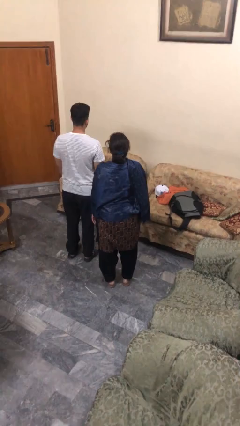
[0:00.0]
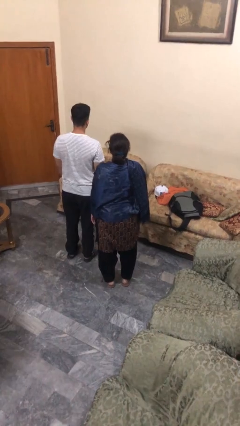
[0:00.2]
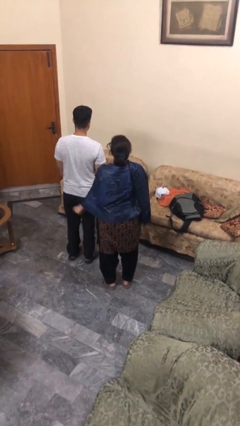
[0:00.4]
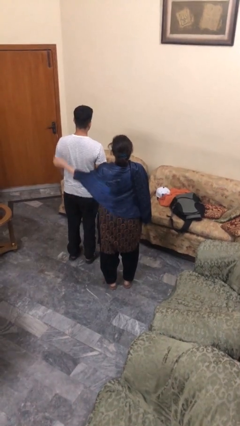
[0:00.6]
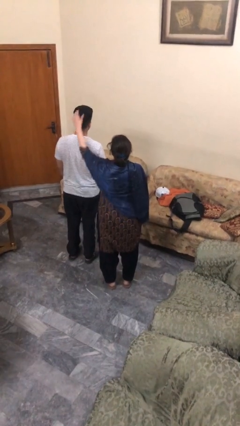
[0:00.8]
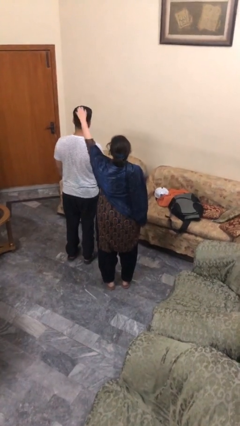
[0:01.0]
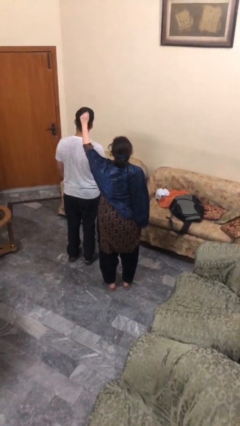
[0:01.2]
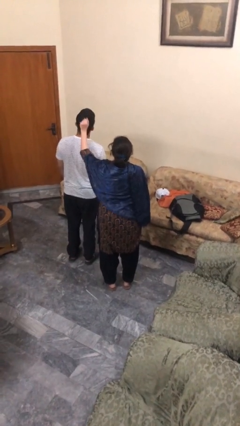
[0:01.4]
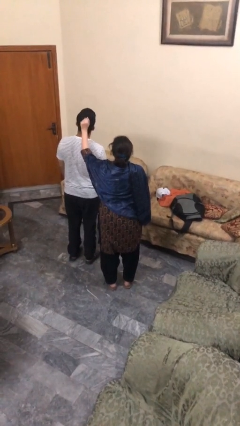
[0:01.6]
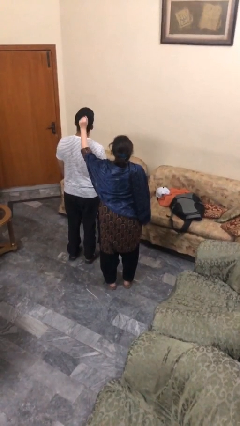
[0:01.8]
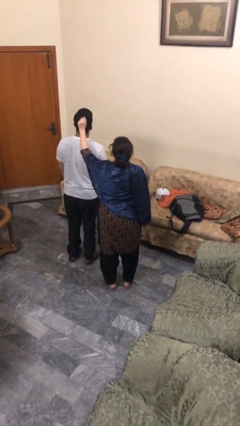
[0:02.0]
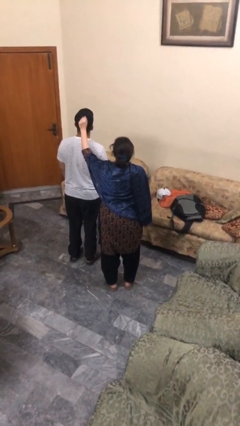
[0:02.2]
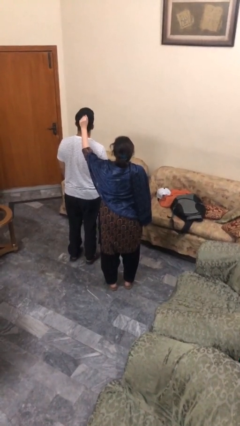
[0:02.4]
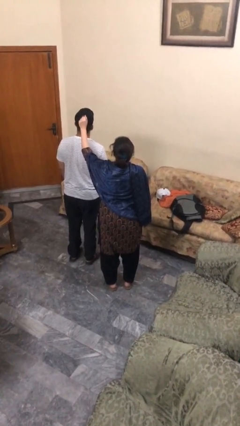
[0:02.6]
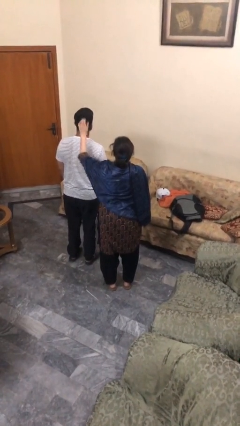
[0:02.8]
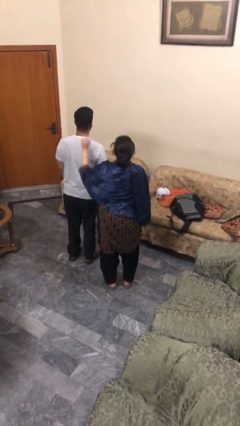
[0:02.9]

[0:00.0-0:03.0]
person grabs person by hair

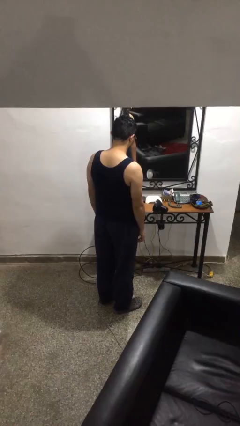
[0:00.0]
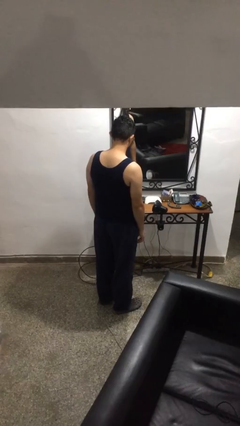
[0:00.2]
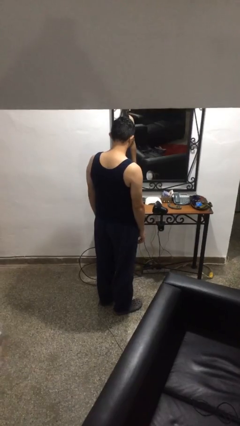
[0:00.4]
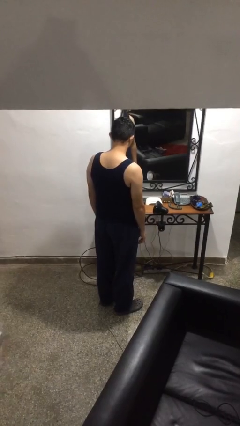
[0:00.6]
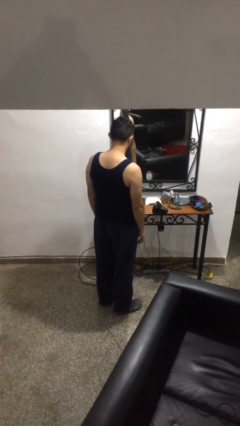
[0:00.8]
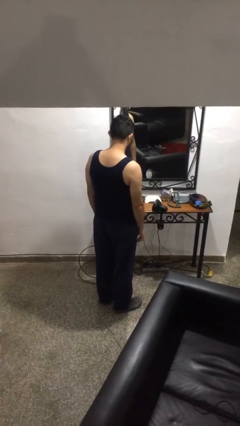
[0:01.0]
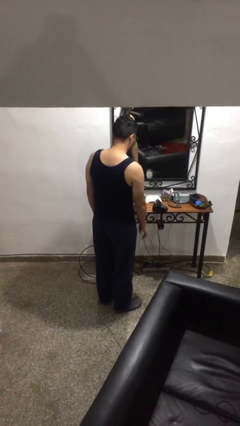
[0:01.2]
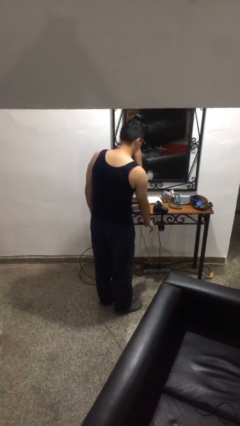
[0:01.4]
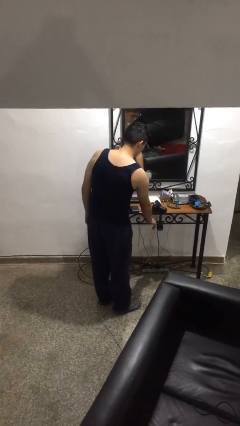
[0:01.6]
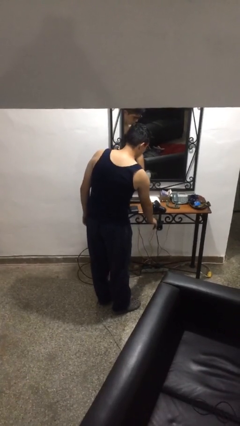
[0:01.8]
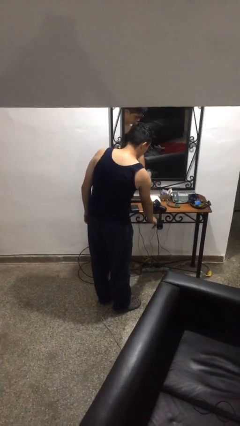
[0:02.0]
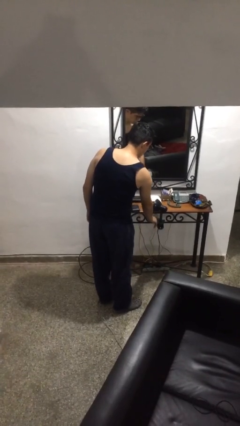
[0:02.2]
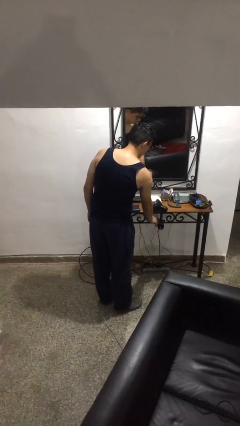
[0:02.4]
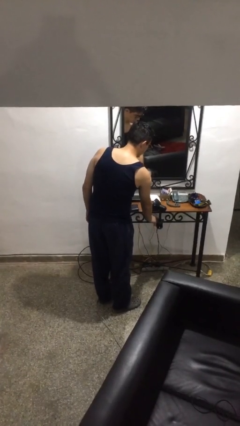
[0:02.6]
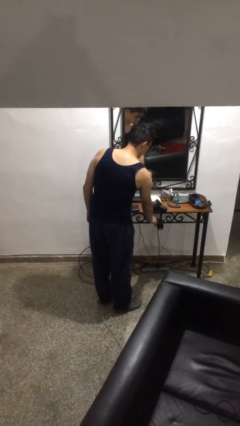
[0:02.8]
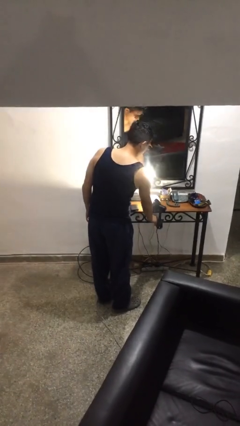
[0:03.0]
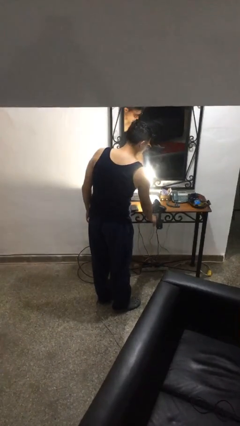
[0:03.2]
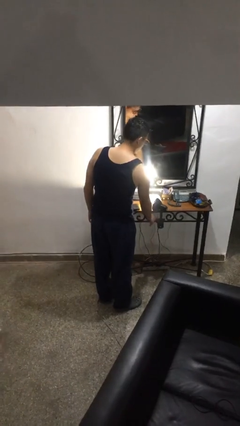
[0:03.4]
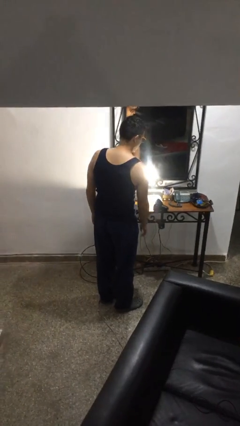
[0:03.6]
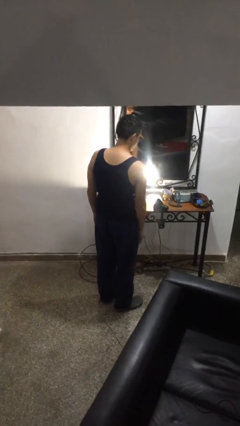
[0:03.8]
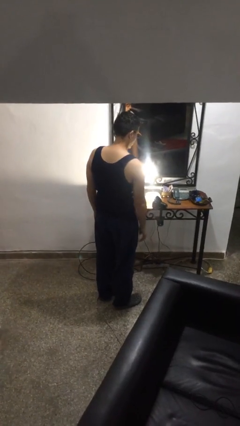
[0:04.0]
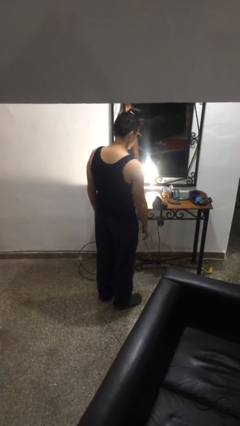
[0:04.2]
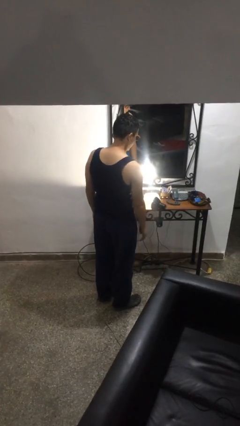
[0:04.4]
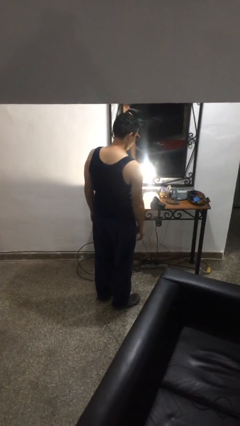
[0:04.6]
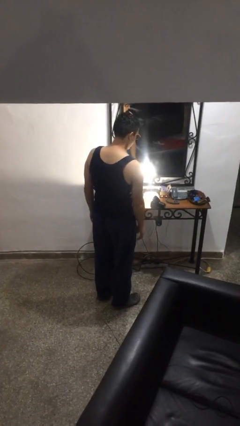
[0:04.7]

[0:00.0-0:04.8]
person turns on lamp

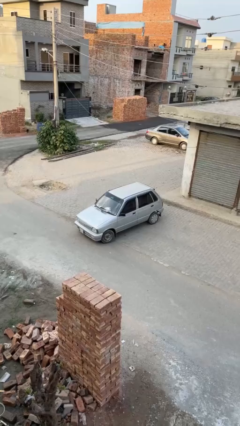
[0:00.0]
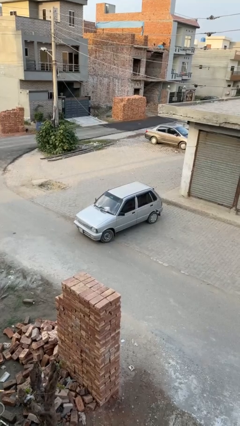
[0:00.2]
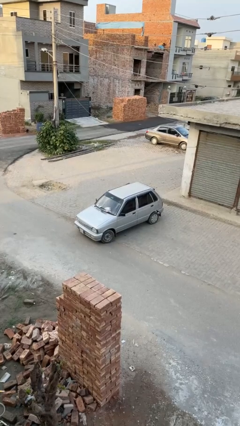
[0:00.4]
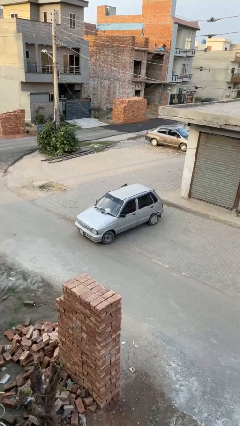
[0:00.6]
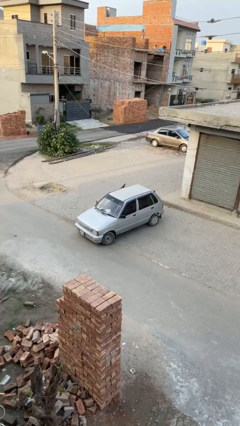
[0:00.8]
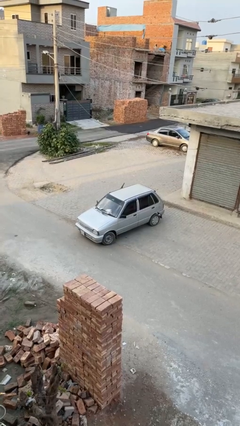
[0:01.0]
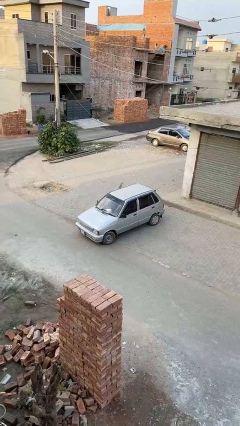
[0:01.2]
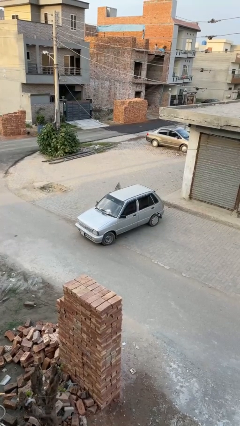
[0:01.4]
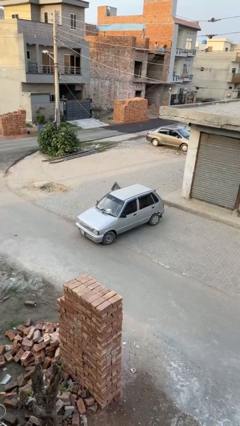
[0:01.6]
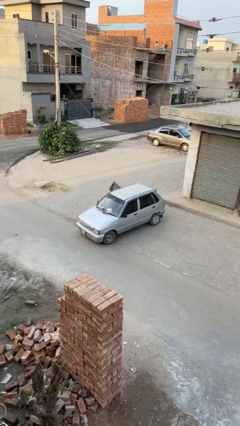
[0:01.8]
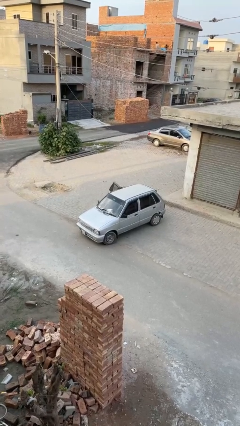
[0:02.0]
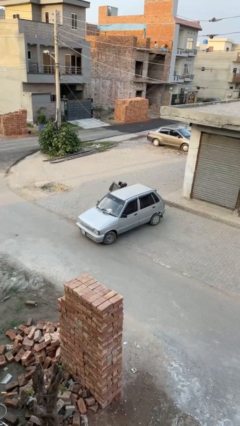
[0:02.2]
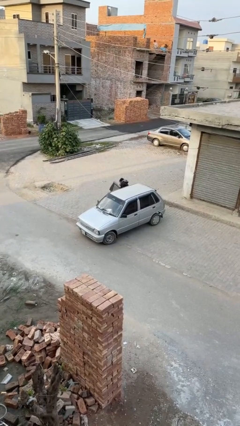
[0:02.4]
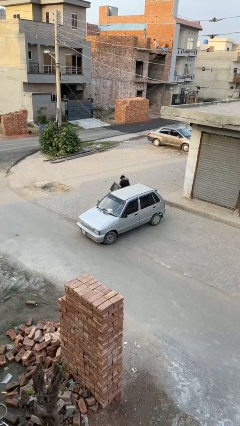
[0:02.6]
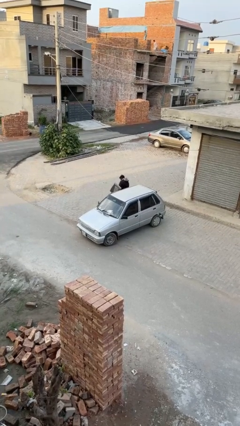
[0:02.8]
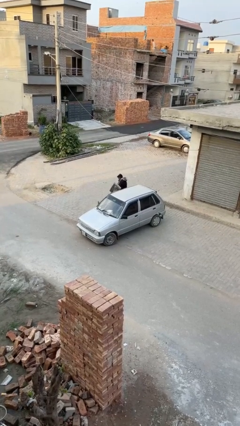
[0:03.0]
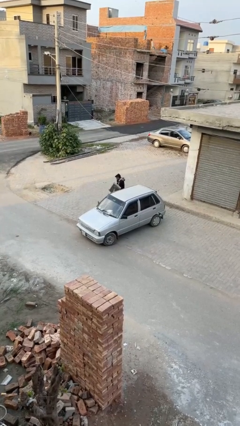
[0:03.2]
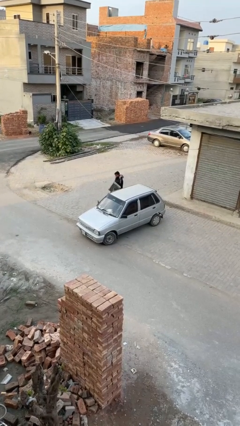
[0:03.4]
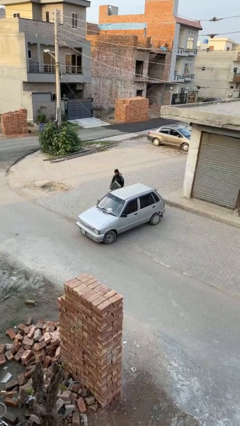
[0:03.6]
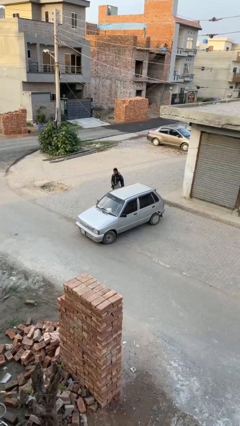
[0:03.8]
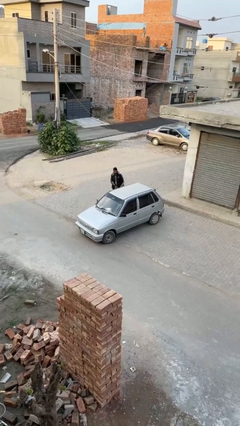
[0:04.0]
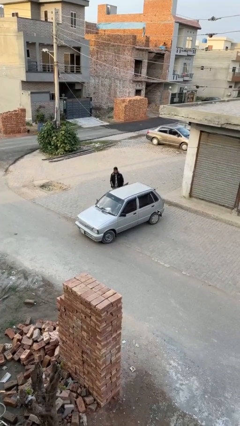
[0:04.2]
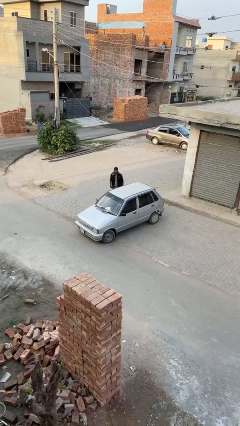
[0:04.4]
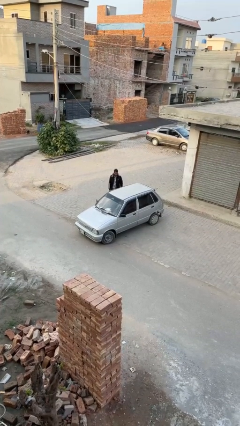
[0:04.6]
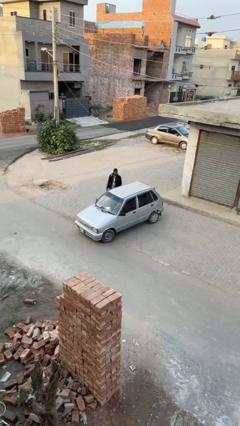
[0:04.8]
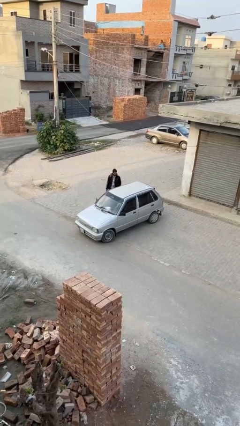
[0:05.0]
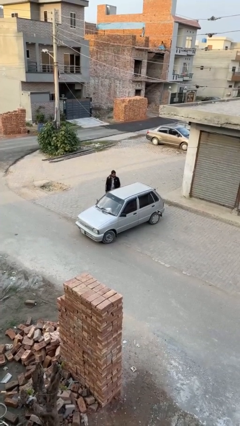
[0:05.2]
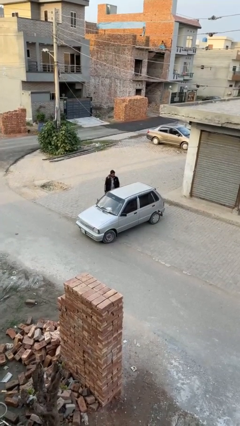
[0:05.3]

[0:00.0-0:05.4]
car drops off person

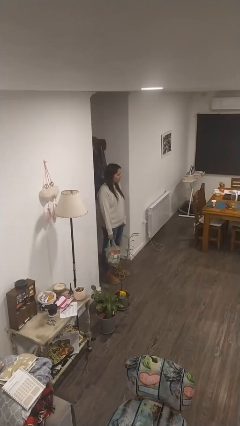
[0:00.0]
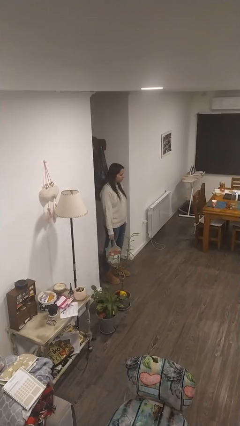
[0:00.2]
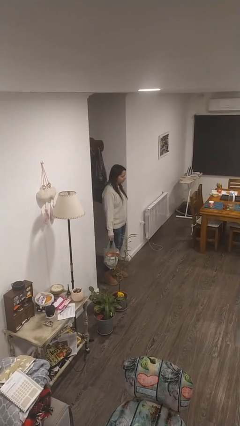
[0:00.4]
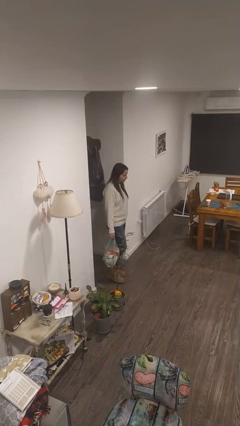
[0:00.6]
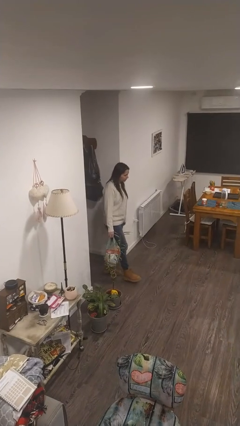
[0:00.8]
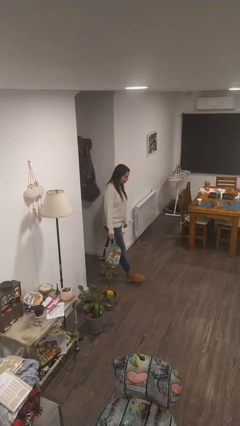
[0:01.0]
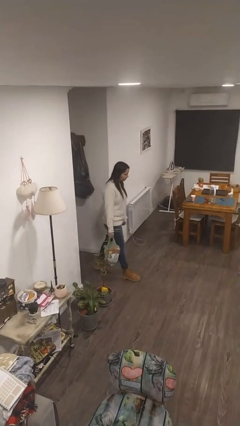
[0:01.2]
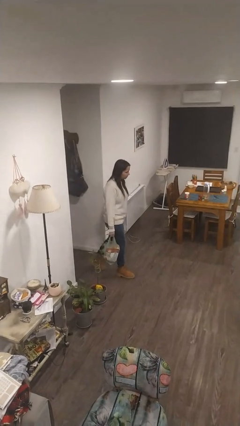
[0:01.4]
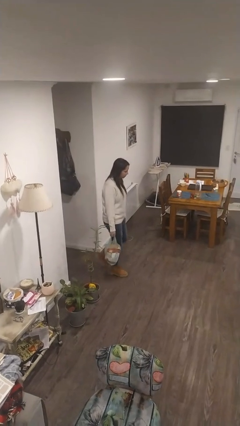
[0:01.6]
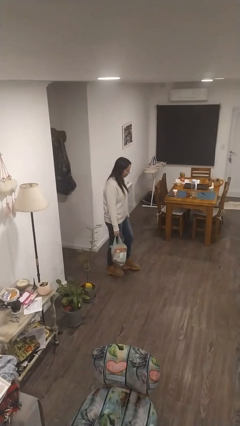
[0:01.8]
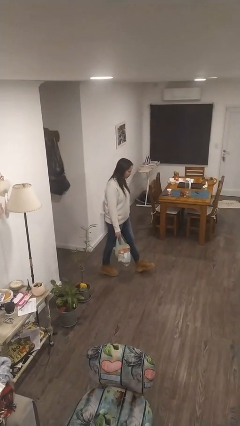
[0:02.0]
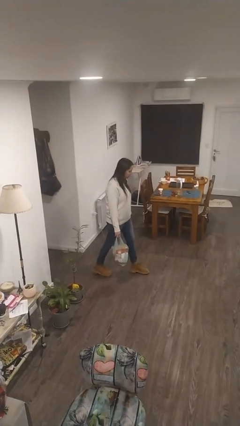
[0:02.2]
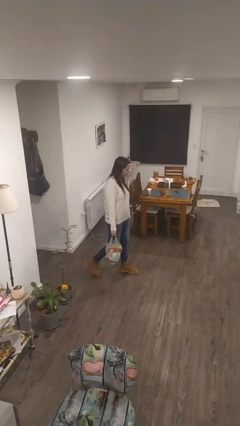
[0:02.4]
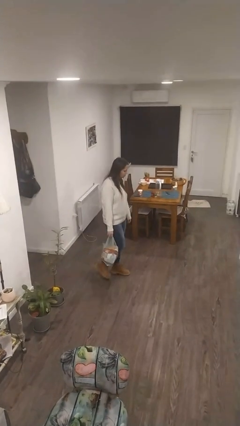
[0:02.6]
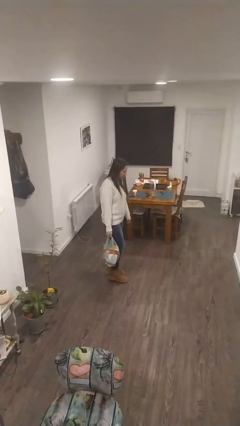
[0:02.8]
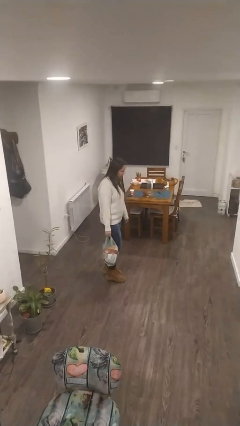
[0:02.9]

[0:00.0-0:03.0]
person carries groceries

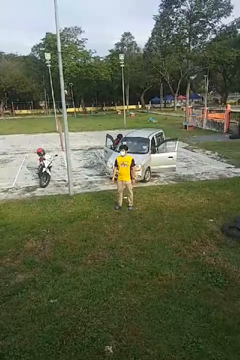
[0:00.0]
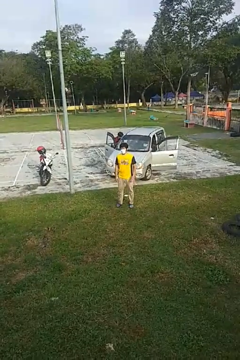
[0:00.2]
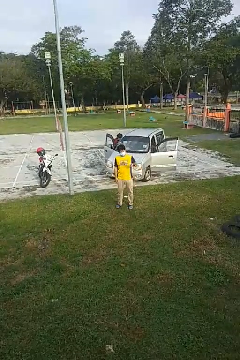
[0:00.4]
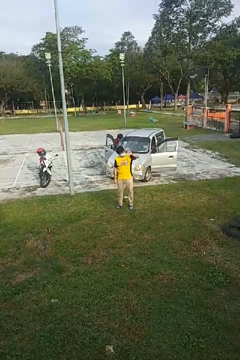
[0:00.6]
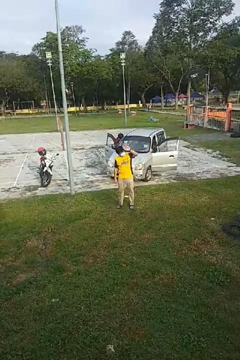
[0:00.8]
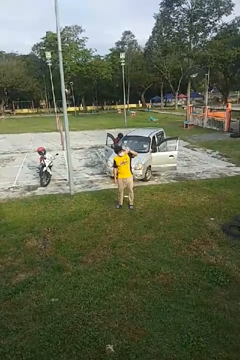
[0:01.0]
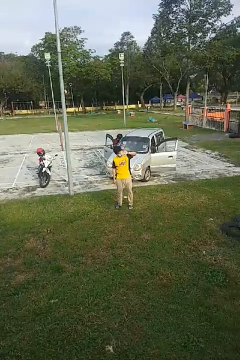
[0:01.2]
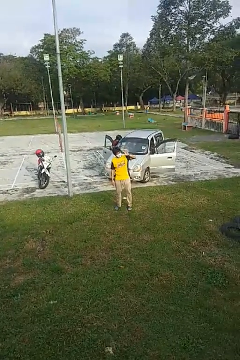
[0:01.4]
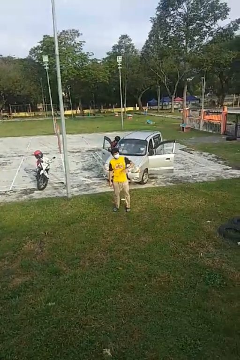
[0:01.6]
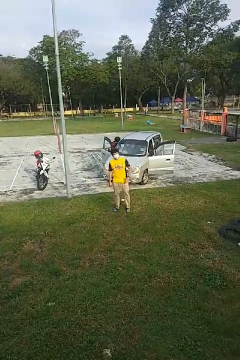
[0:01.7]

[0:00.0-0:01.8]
person waves at person

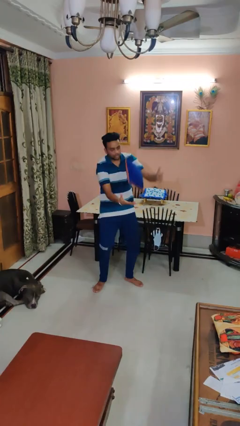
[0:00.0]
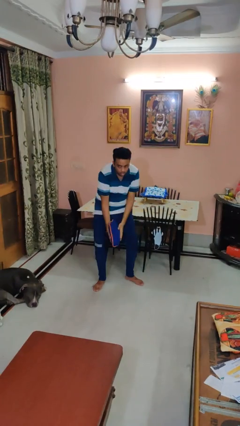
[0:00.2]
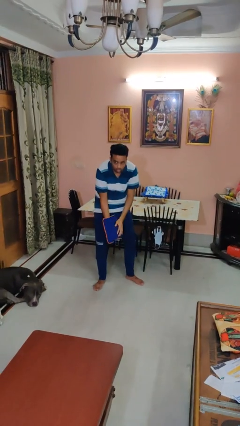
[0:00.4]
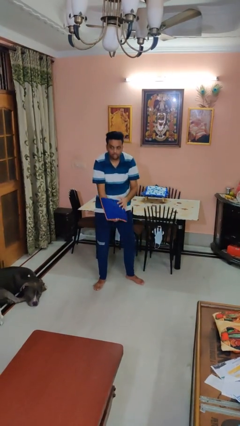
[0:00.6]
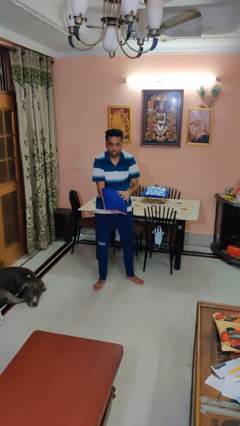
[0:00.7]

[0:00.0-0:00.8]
person catches dropped object
